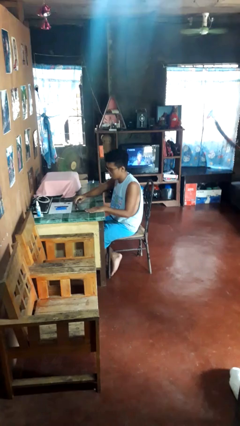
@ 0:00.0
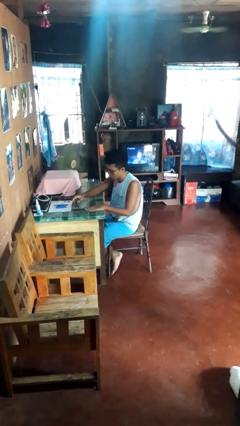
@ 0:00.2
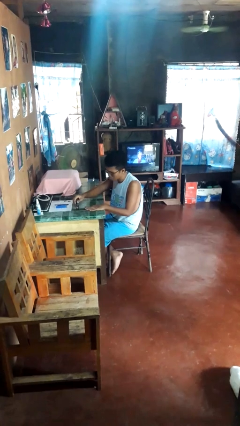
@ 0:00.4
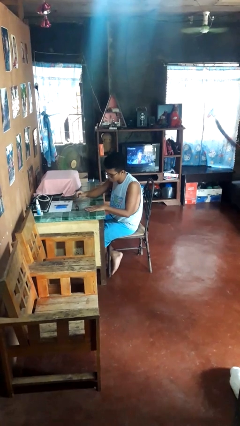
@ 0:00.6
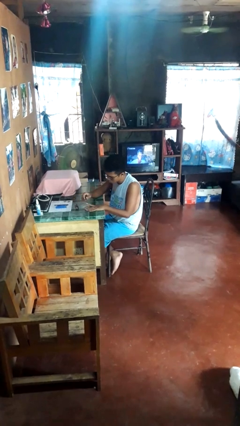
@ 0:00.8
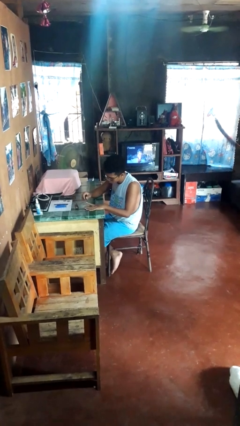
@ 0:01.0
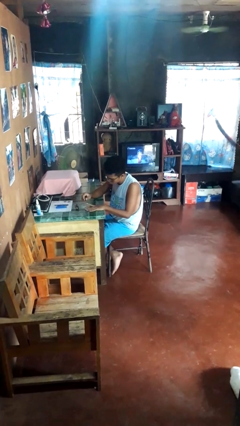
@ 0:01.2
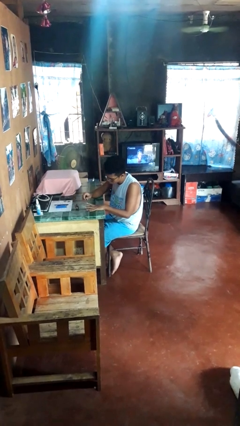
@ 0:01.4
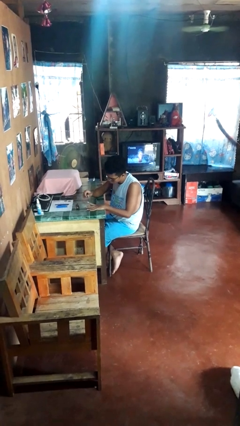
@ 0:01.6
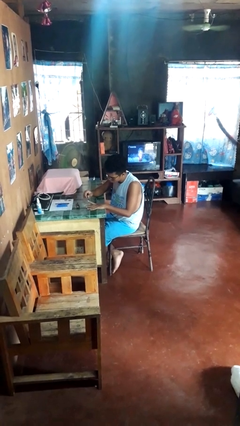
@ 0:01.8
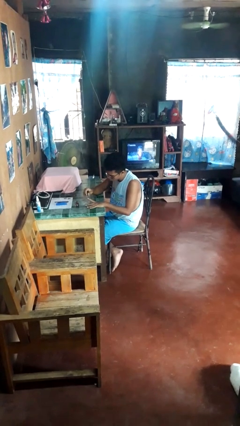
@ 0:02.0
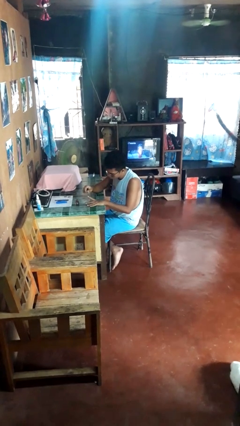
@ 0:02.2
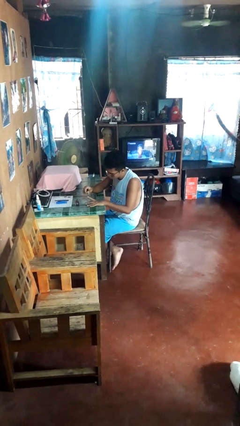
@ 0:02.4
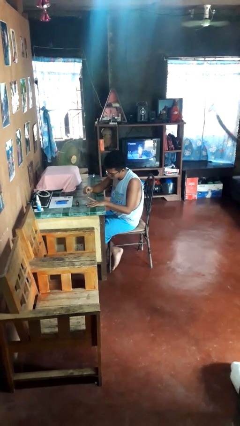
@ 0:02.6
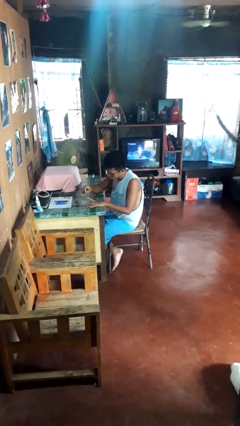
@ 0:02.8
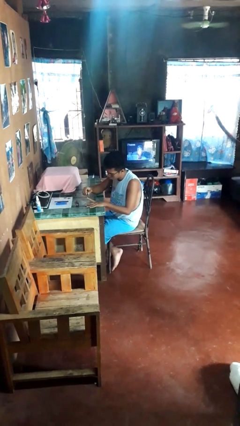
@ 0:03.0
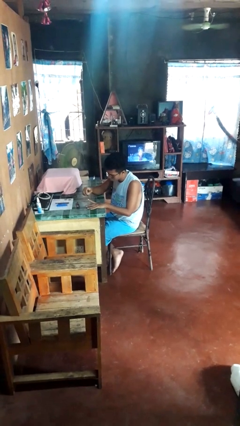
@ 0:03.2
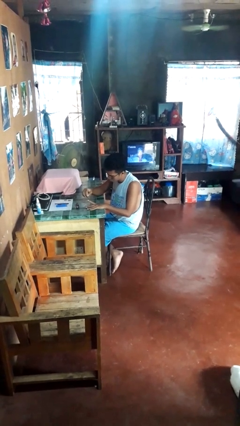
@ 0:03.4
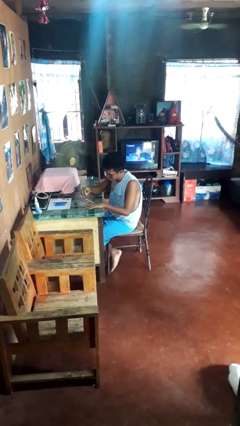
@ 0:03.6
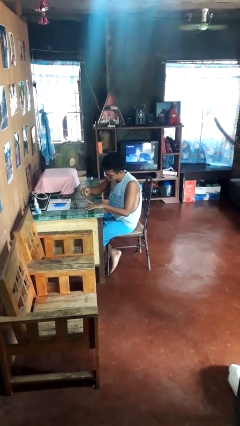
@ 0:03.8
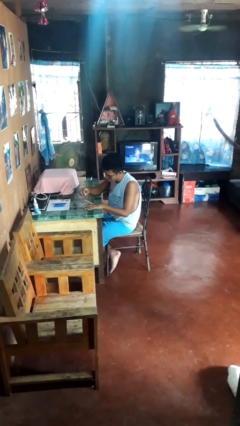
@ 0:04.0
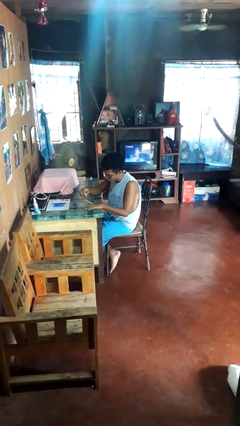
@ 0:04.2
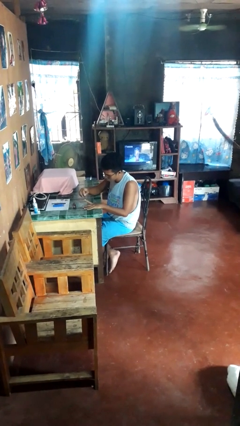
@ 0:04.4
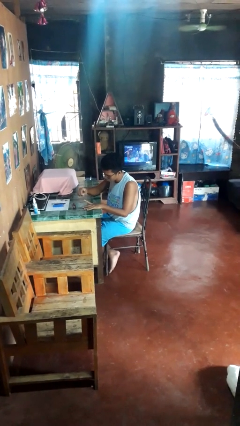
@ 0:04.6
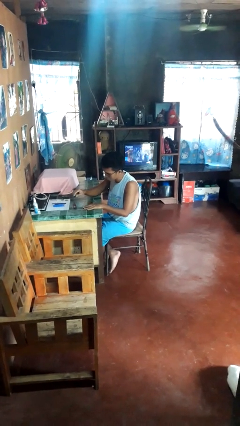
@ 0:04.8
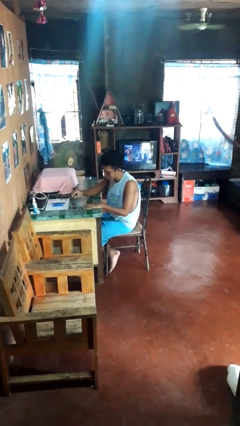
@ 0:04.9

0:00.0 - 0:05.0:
person paints fingernails

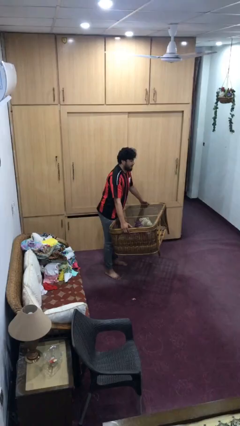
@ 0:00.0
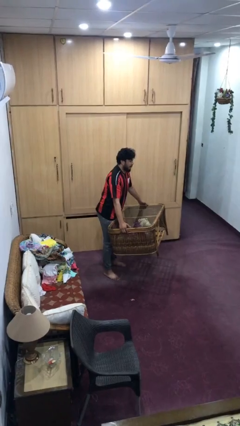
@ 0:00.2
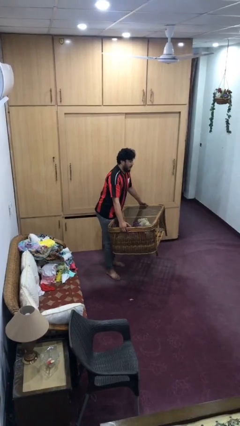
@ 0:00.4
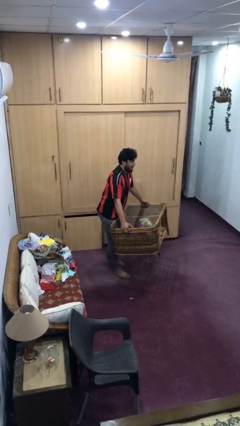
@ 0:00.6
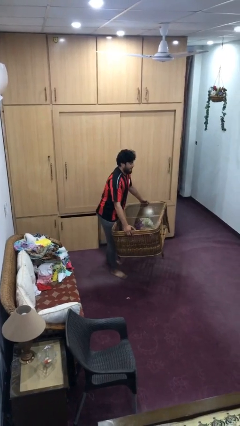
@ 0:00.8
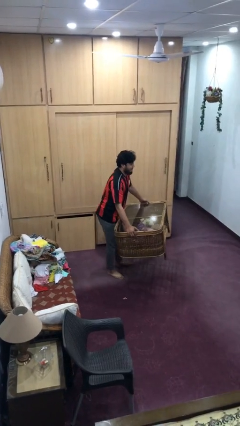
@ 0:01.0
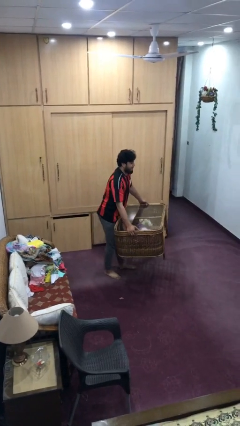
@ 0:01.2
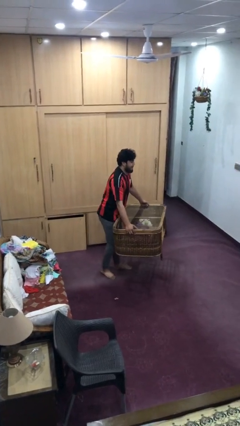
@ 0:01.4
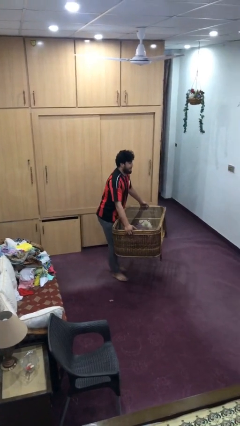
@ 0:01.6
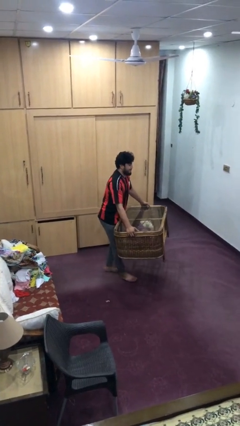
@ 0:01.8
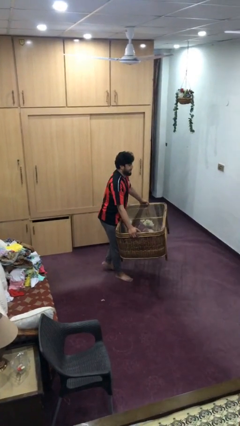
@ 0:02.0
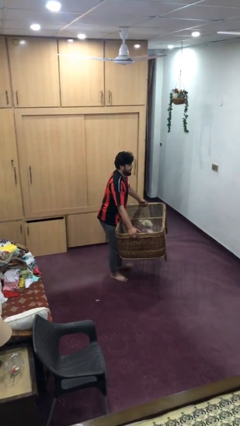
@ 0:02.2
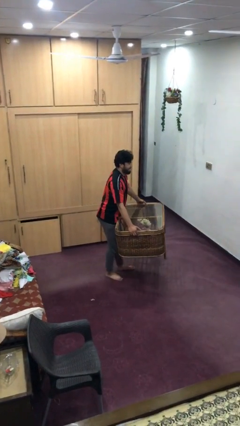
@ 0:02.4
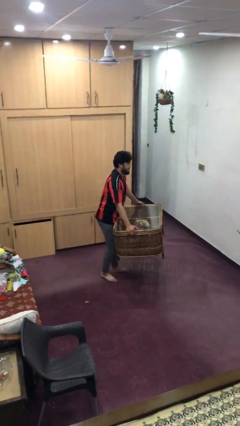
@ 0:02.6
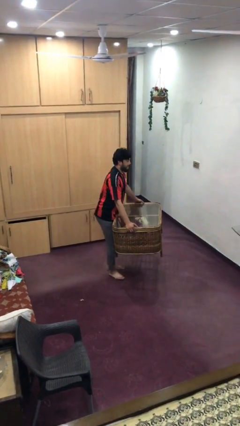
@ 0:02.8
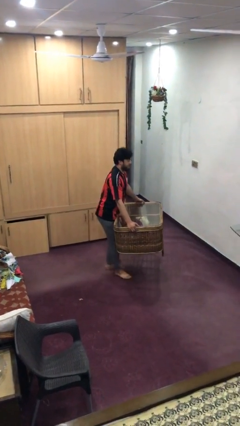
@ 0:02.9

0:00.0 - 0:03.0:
person carries heavy object

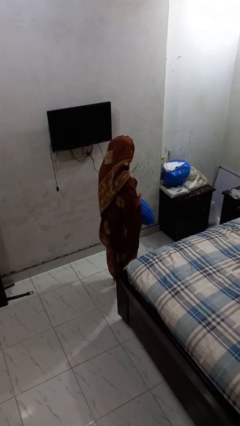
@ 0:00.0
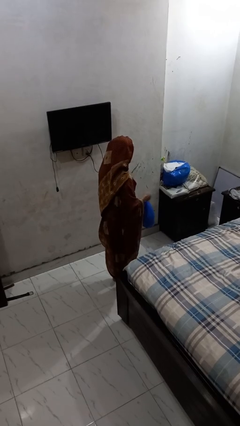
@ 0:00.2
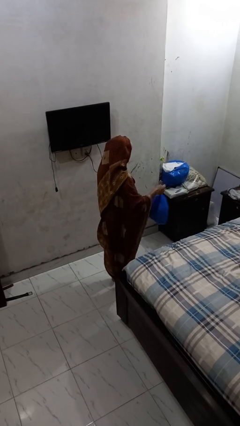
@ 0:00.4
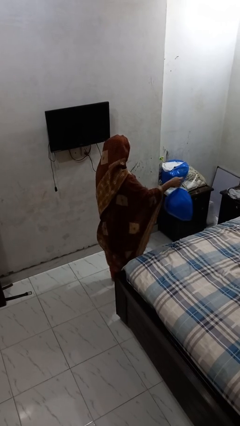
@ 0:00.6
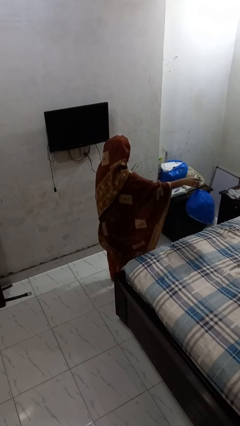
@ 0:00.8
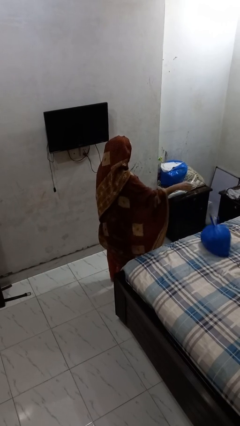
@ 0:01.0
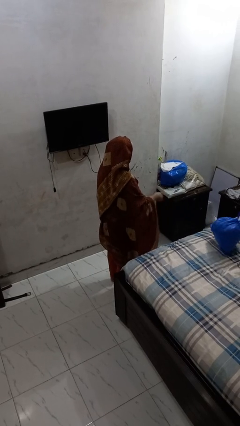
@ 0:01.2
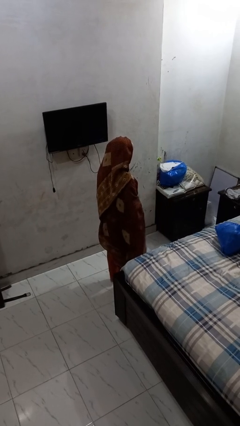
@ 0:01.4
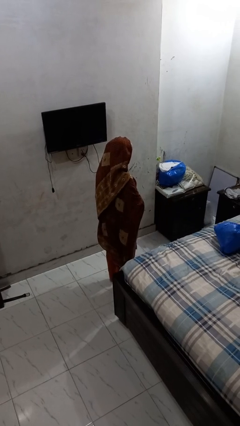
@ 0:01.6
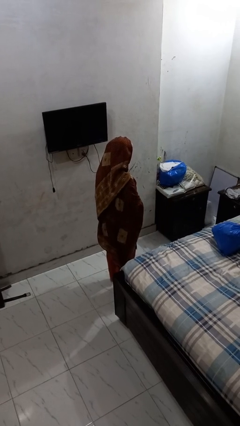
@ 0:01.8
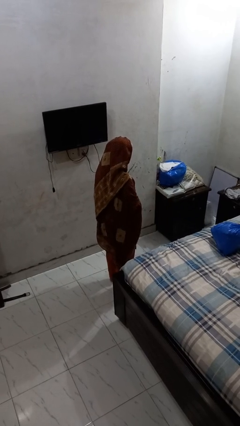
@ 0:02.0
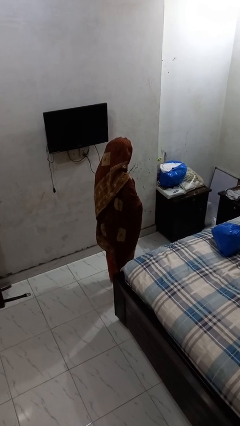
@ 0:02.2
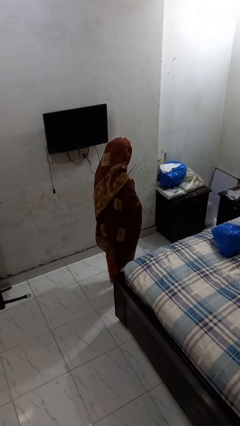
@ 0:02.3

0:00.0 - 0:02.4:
person throws object on bed

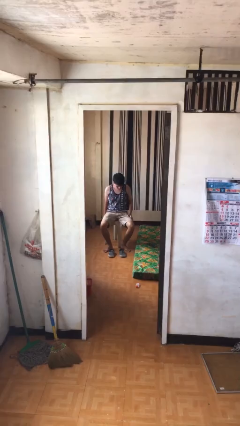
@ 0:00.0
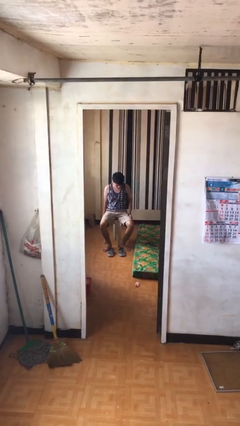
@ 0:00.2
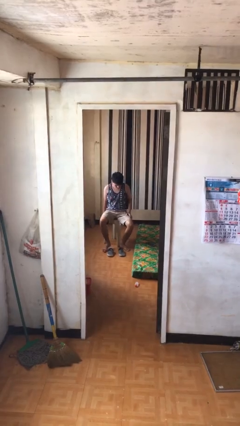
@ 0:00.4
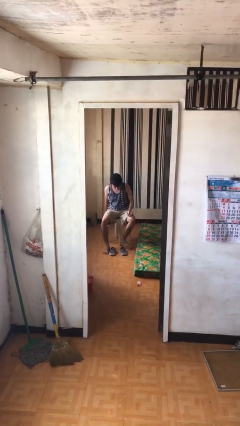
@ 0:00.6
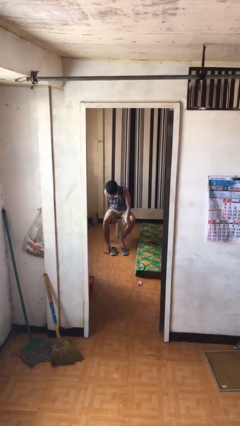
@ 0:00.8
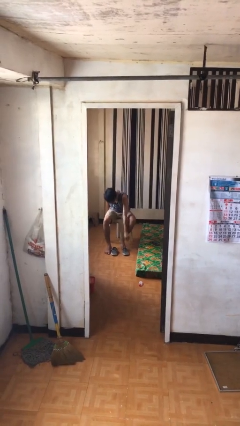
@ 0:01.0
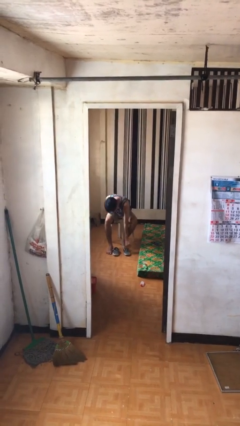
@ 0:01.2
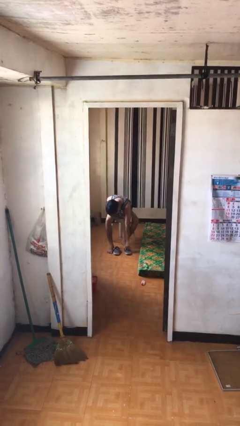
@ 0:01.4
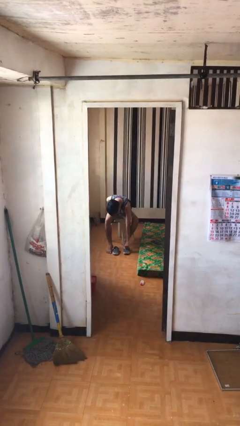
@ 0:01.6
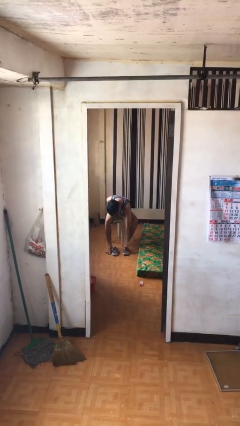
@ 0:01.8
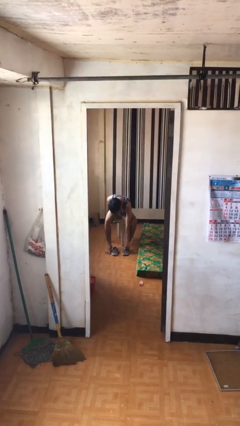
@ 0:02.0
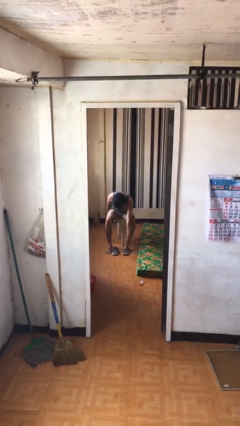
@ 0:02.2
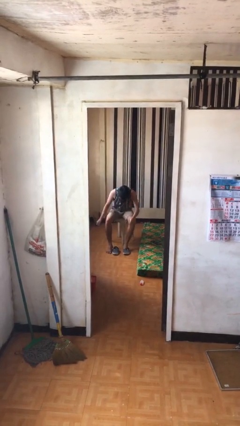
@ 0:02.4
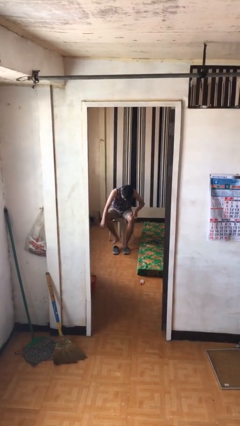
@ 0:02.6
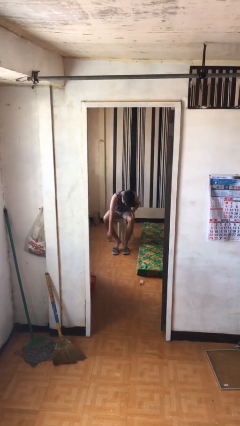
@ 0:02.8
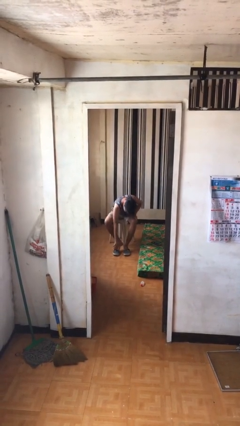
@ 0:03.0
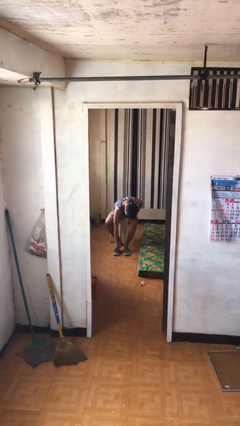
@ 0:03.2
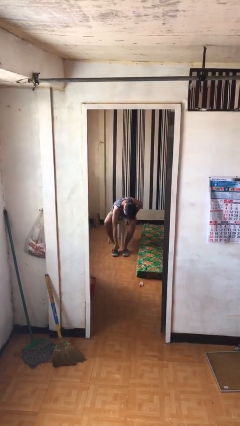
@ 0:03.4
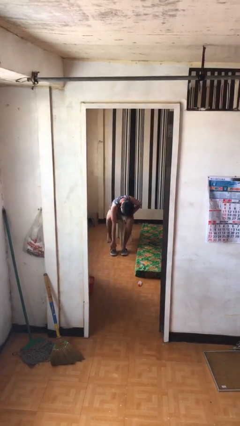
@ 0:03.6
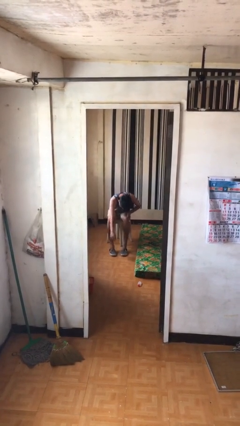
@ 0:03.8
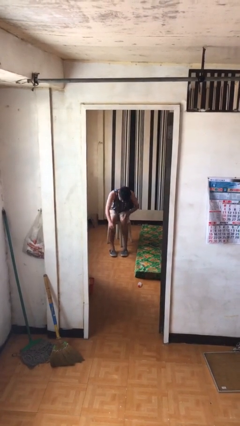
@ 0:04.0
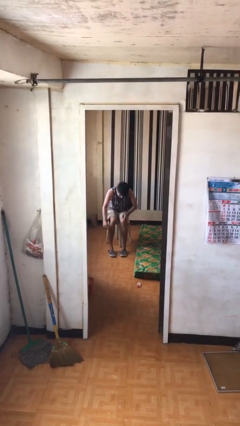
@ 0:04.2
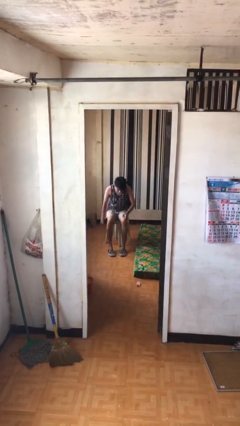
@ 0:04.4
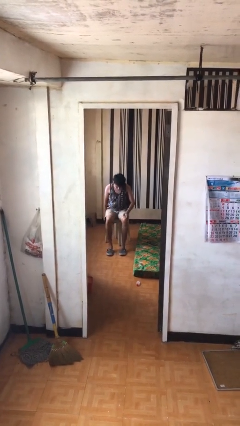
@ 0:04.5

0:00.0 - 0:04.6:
person puts on shoes

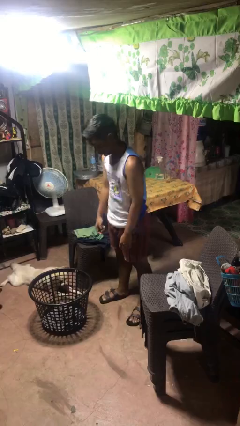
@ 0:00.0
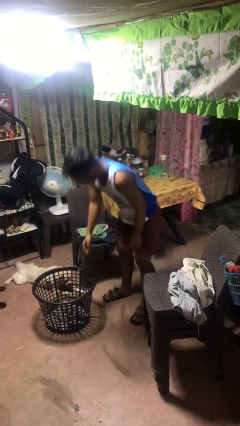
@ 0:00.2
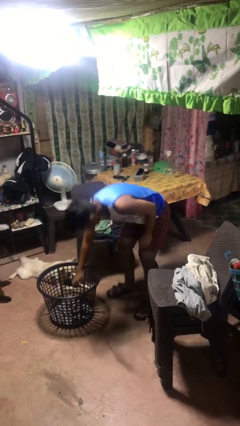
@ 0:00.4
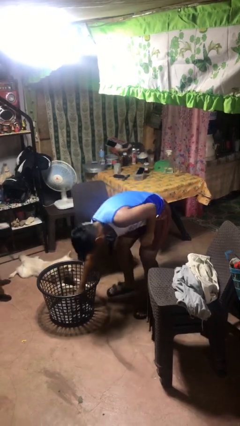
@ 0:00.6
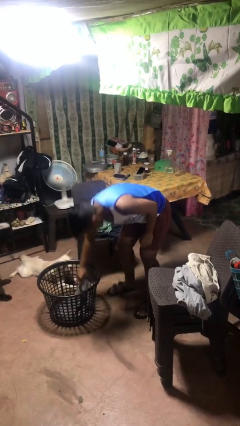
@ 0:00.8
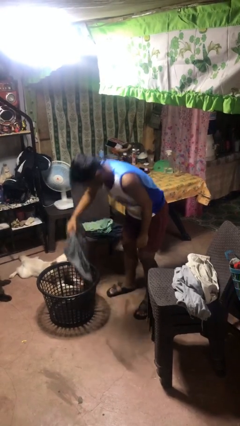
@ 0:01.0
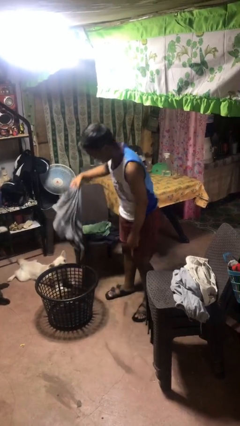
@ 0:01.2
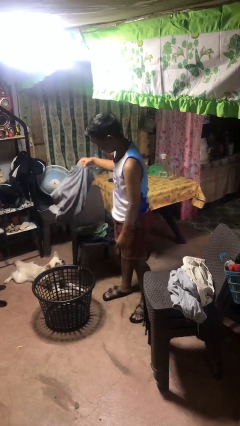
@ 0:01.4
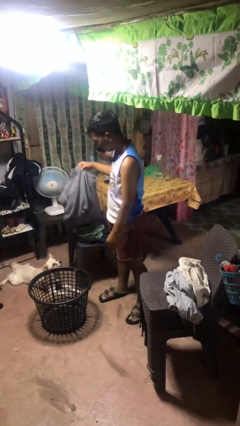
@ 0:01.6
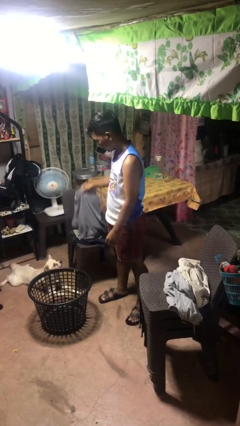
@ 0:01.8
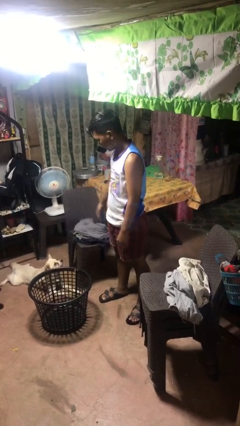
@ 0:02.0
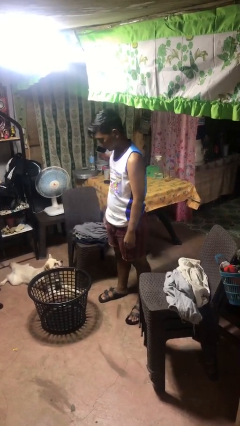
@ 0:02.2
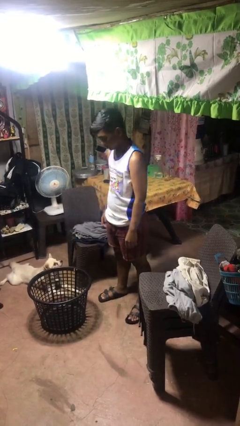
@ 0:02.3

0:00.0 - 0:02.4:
person takes object from basket
